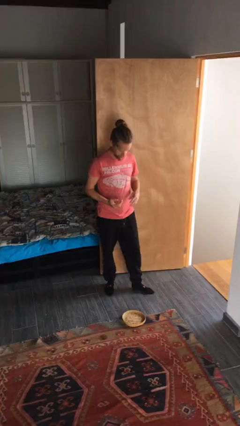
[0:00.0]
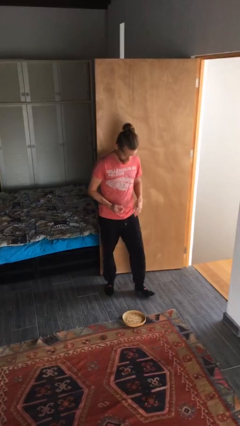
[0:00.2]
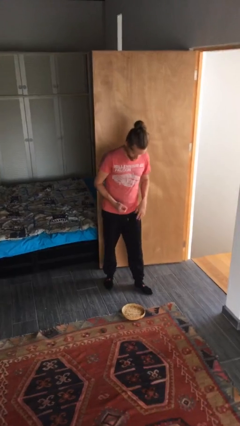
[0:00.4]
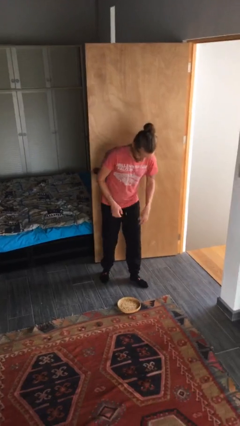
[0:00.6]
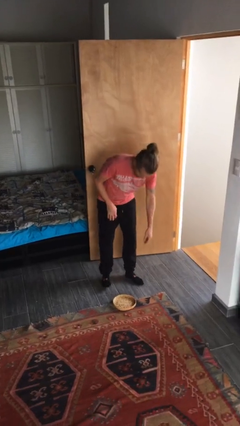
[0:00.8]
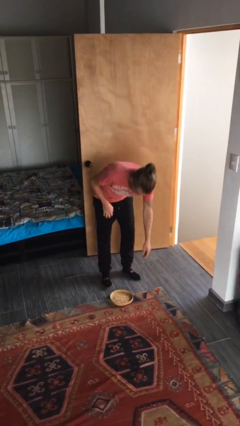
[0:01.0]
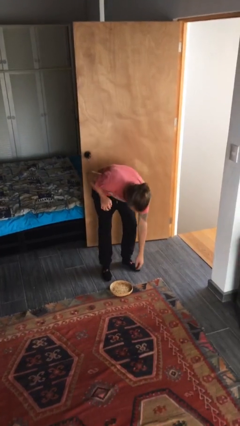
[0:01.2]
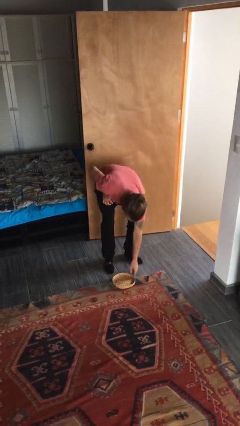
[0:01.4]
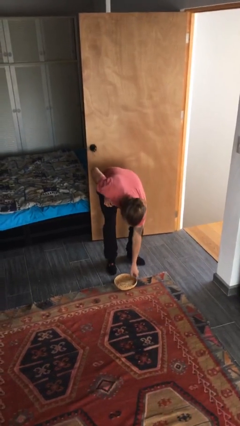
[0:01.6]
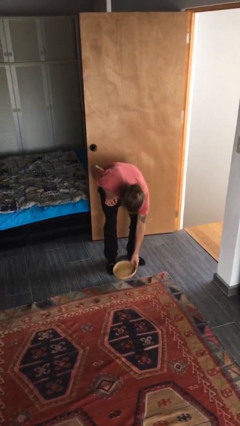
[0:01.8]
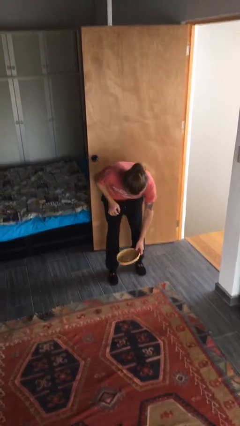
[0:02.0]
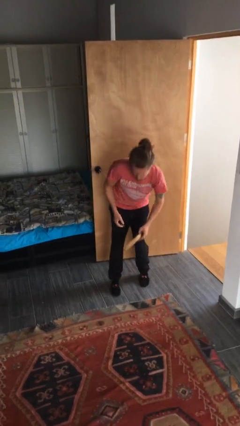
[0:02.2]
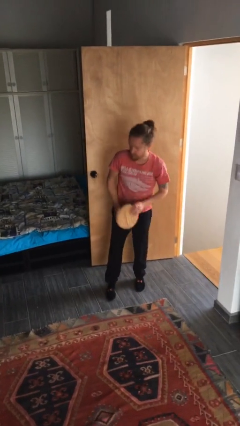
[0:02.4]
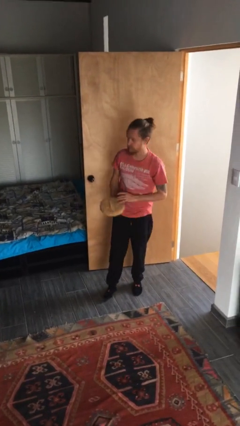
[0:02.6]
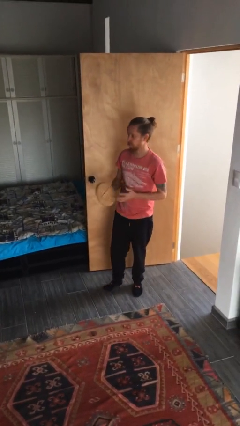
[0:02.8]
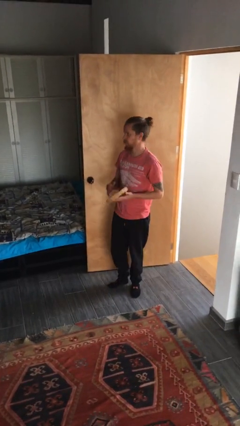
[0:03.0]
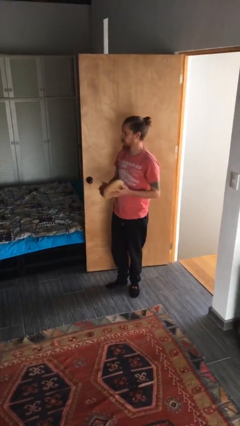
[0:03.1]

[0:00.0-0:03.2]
person picks up object from floor

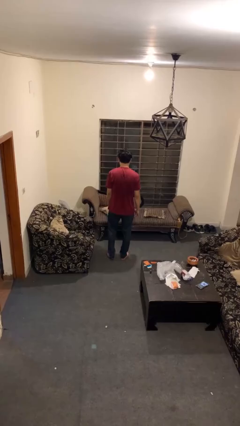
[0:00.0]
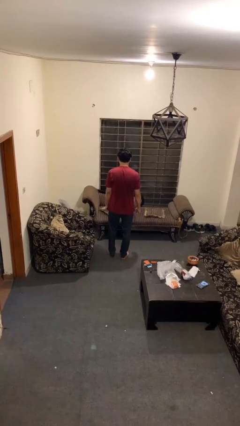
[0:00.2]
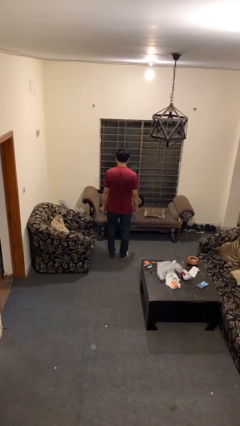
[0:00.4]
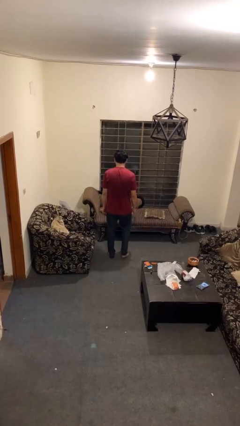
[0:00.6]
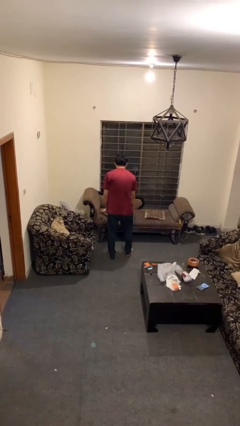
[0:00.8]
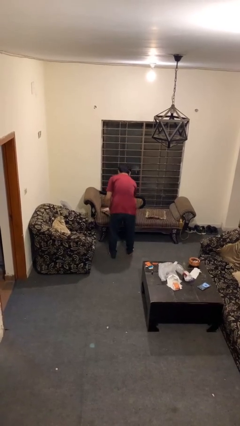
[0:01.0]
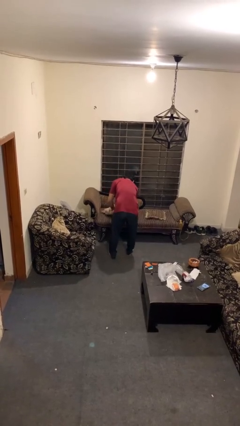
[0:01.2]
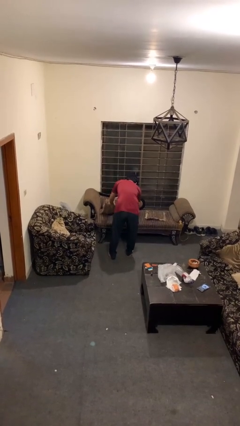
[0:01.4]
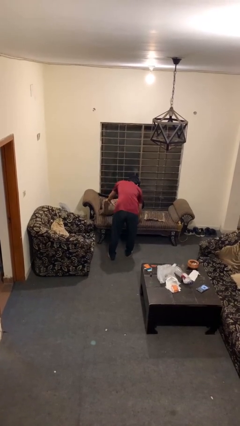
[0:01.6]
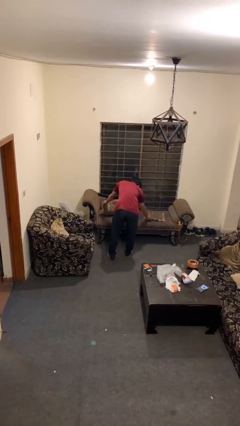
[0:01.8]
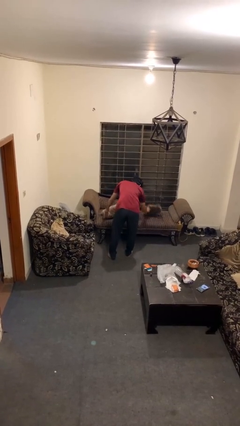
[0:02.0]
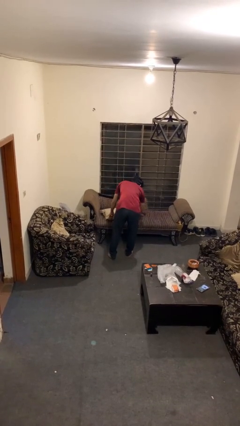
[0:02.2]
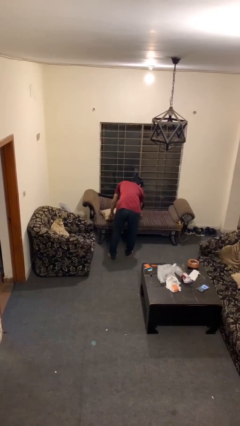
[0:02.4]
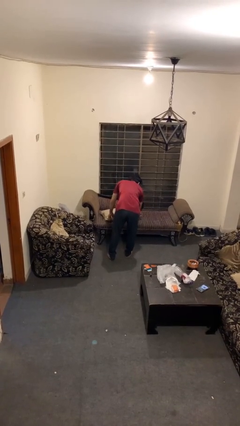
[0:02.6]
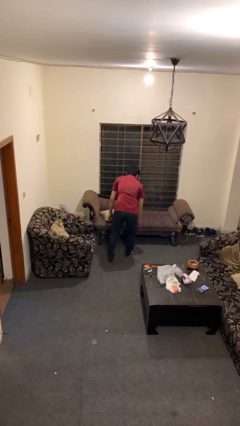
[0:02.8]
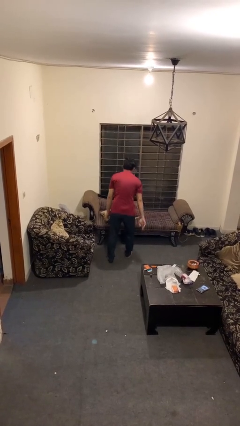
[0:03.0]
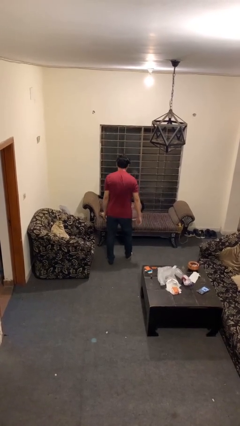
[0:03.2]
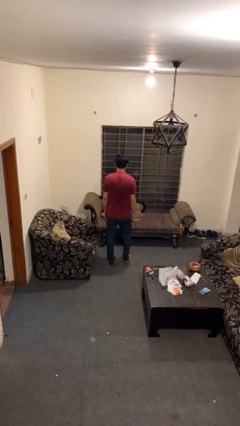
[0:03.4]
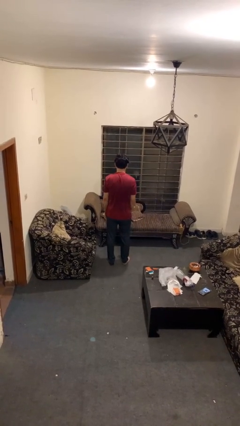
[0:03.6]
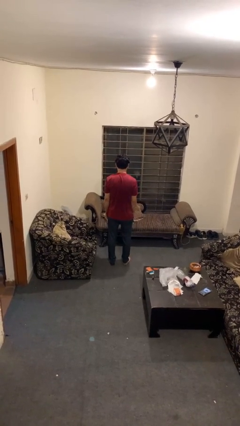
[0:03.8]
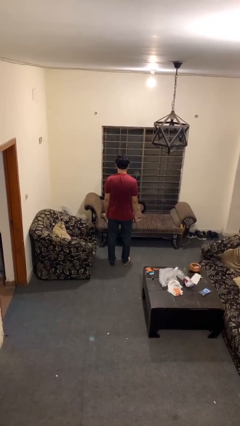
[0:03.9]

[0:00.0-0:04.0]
person searches in couch

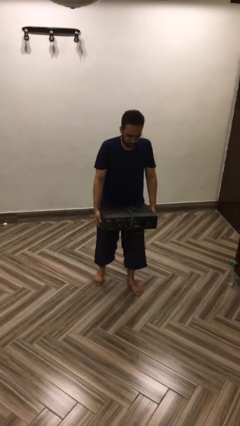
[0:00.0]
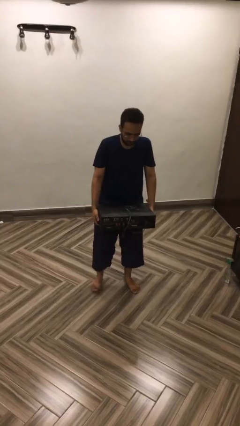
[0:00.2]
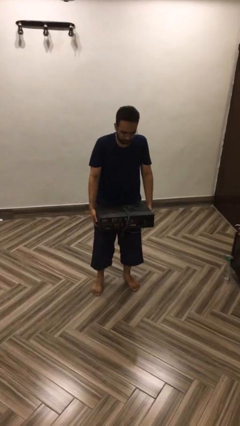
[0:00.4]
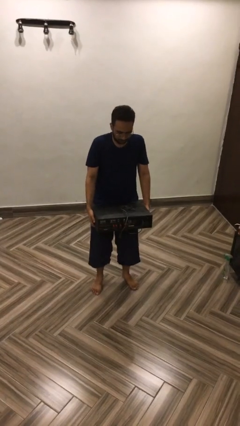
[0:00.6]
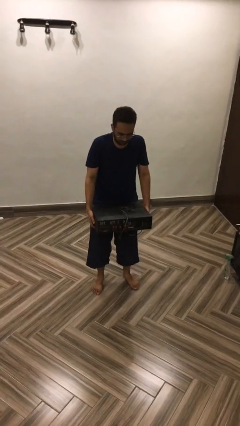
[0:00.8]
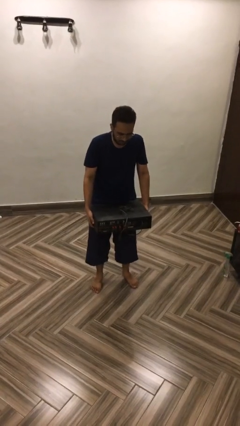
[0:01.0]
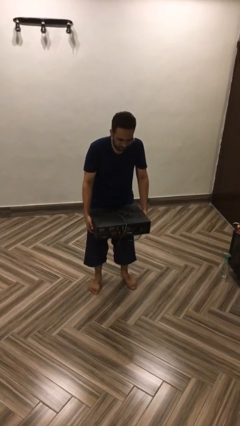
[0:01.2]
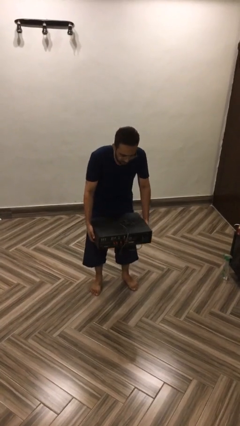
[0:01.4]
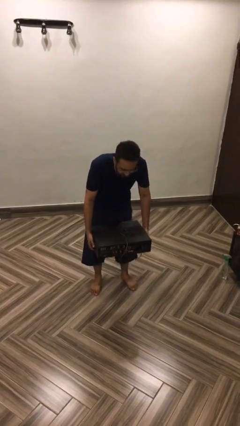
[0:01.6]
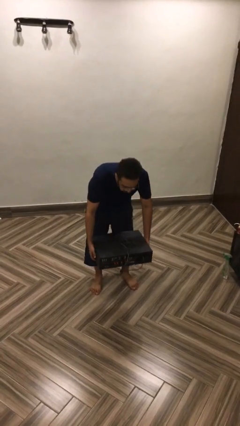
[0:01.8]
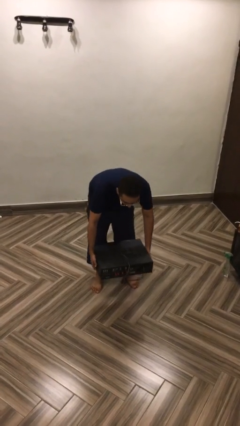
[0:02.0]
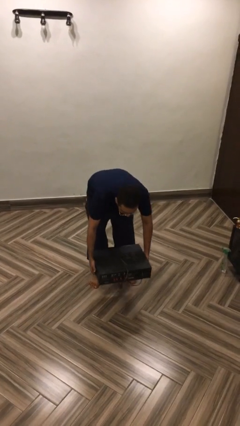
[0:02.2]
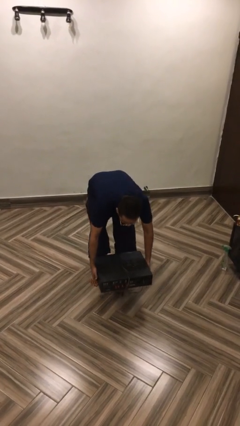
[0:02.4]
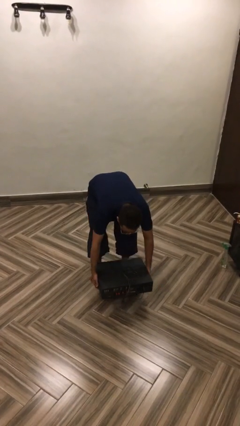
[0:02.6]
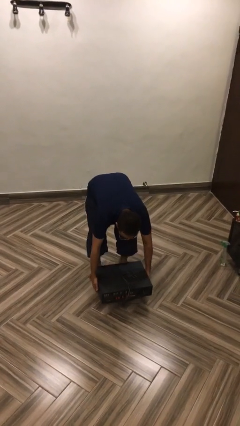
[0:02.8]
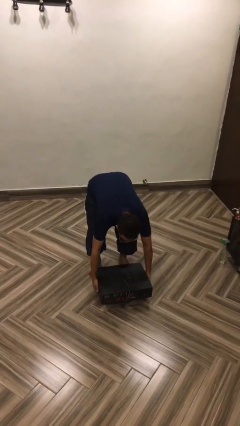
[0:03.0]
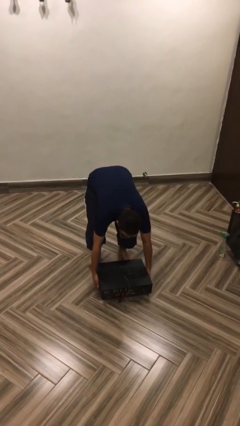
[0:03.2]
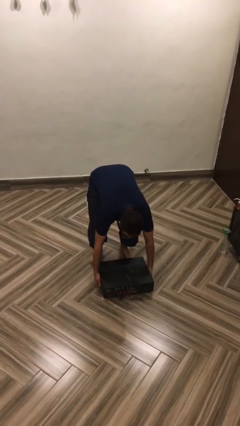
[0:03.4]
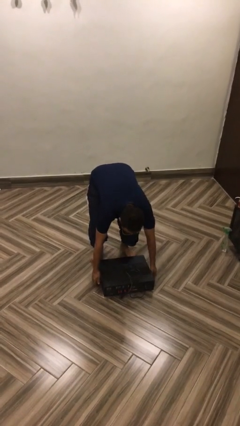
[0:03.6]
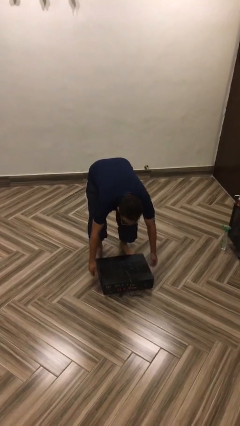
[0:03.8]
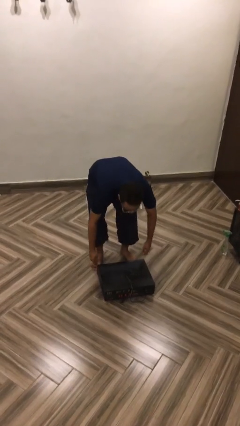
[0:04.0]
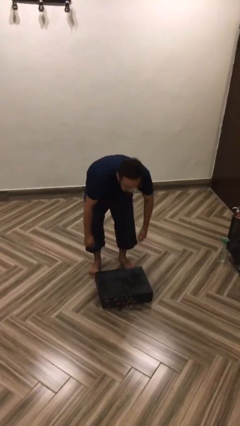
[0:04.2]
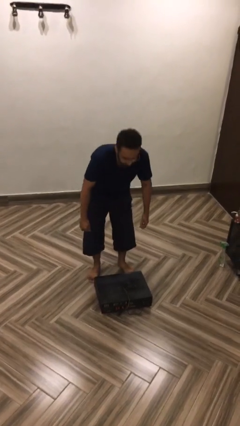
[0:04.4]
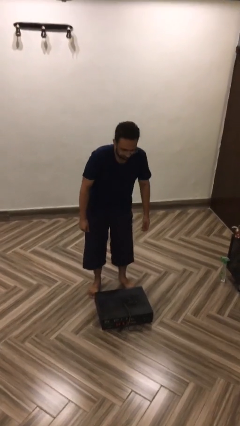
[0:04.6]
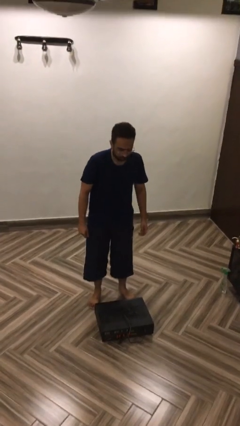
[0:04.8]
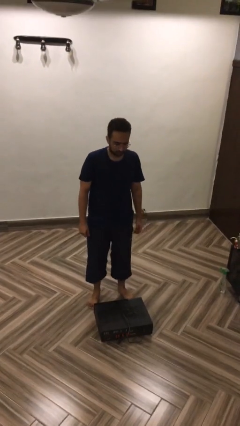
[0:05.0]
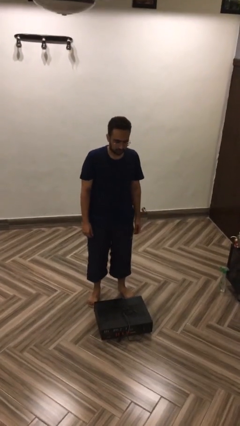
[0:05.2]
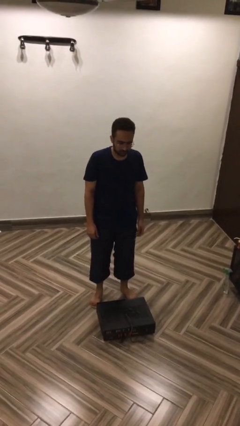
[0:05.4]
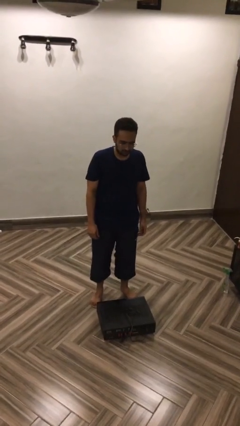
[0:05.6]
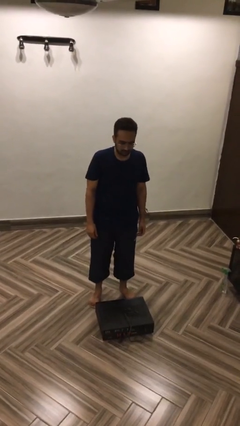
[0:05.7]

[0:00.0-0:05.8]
person puts down object on floor

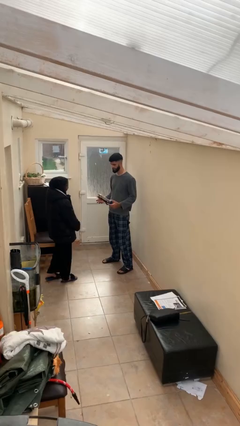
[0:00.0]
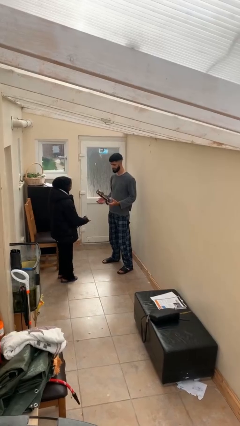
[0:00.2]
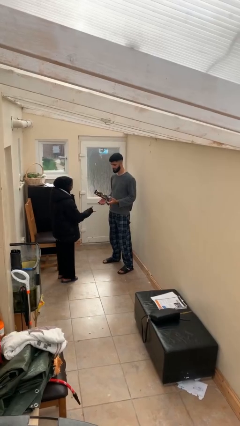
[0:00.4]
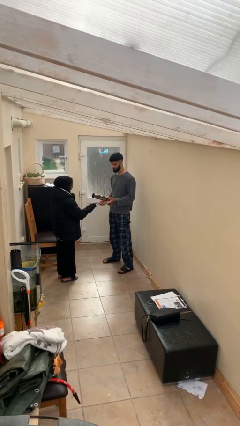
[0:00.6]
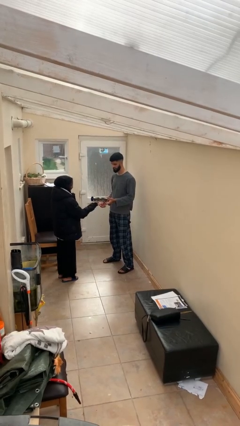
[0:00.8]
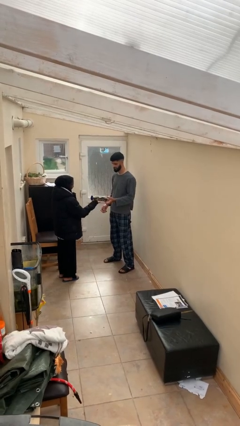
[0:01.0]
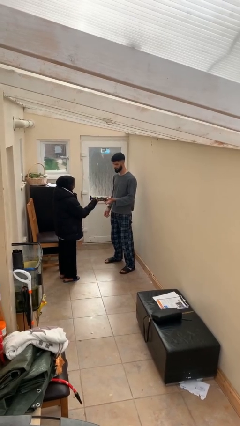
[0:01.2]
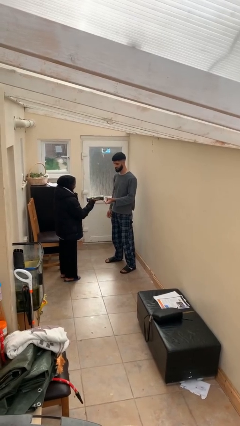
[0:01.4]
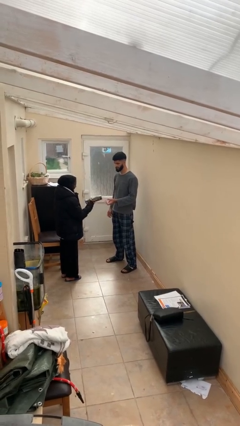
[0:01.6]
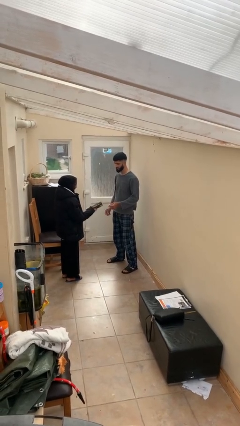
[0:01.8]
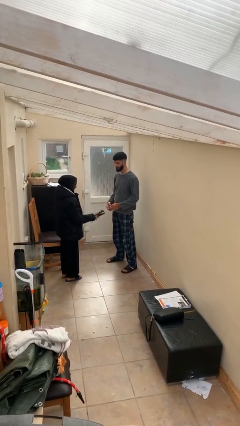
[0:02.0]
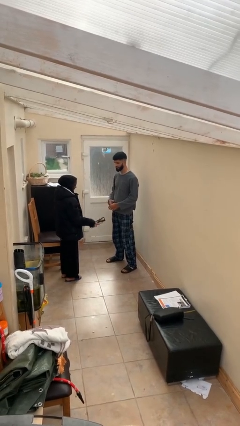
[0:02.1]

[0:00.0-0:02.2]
person transfers object to person

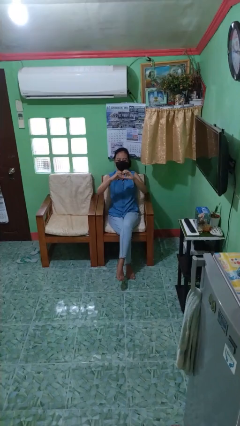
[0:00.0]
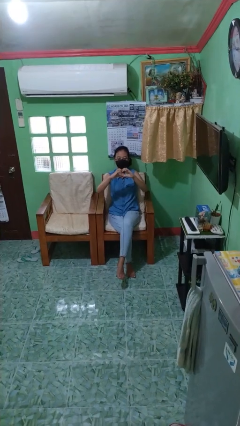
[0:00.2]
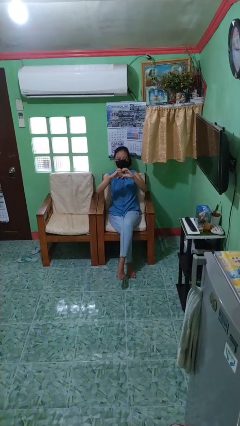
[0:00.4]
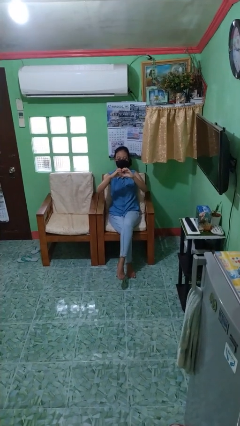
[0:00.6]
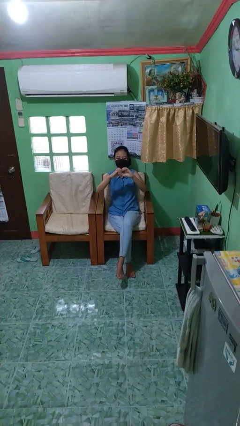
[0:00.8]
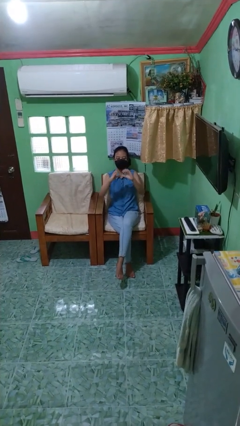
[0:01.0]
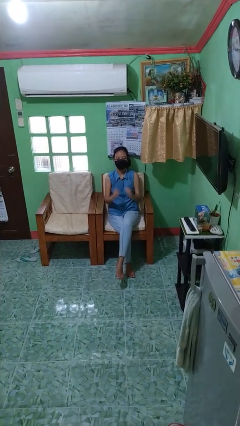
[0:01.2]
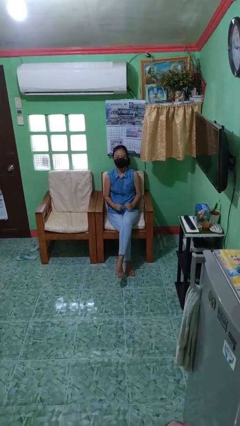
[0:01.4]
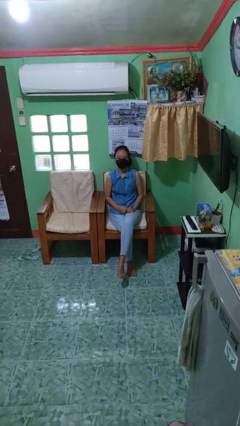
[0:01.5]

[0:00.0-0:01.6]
person gestures heart

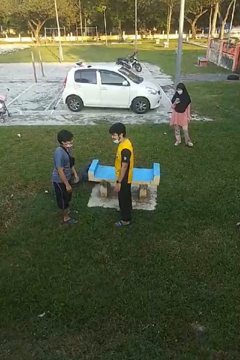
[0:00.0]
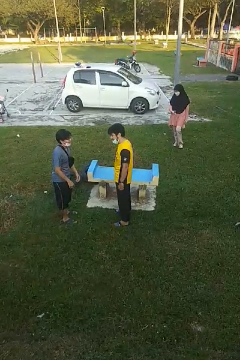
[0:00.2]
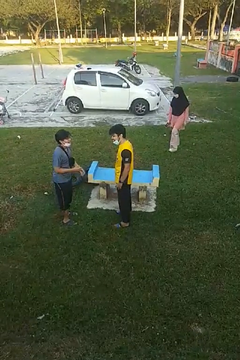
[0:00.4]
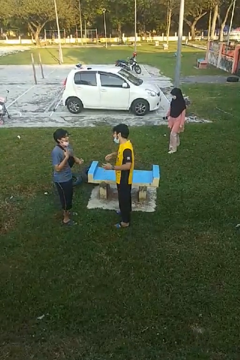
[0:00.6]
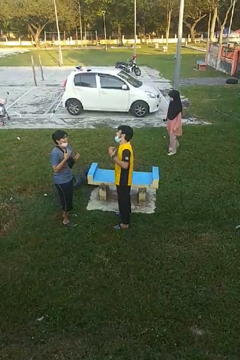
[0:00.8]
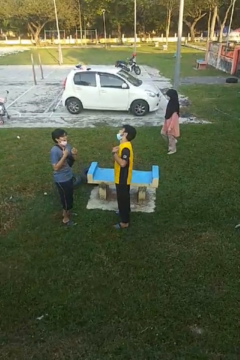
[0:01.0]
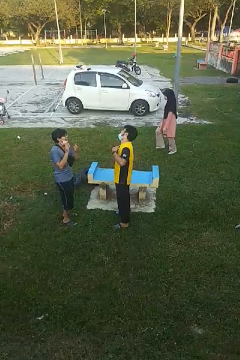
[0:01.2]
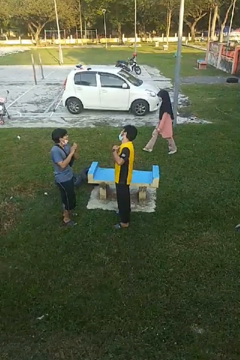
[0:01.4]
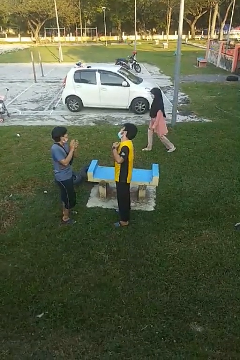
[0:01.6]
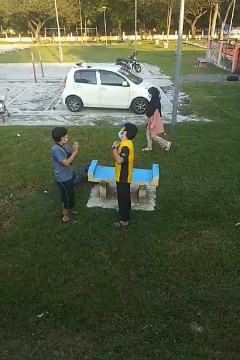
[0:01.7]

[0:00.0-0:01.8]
person laughs with person
